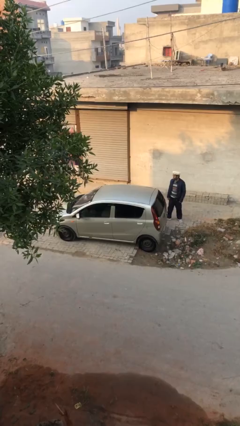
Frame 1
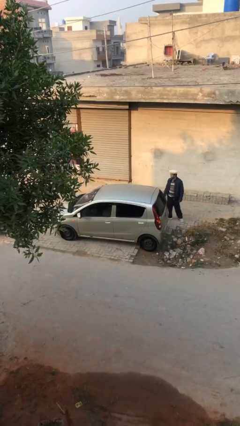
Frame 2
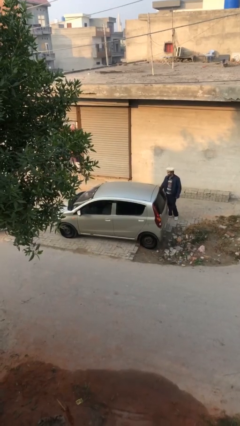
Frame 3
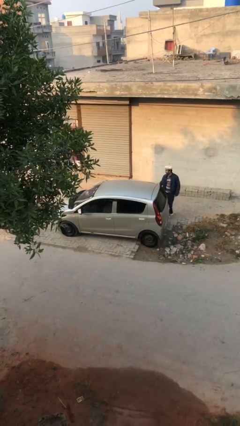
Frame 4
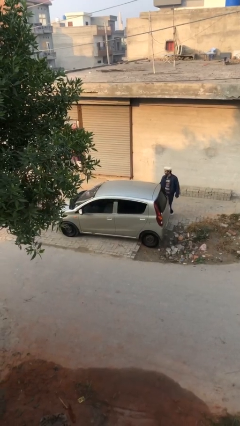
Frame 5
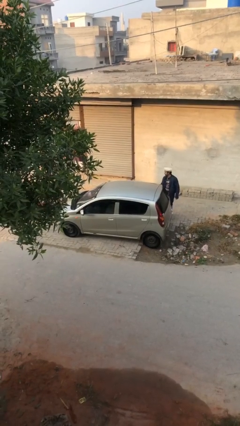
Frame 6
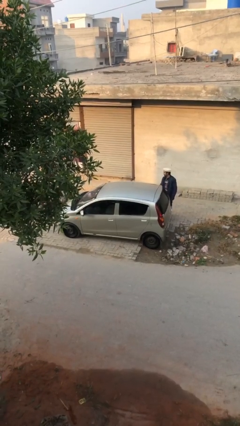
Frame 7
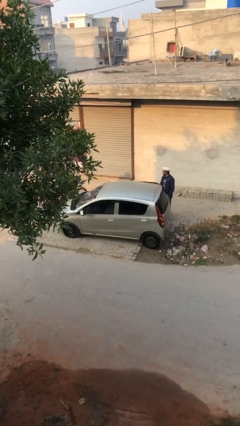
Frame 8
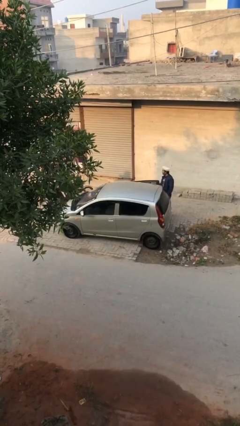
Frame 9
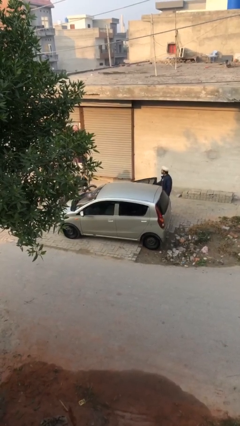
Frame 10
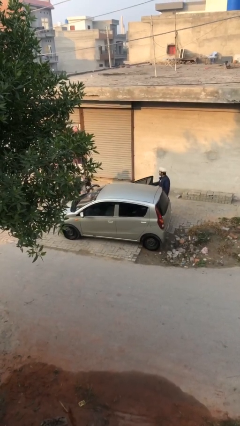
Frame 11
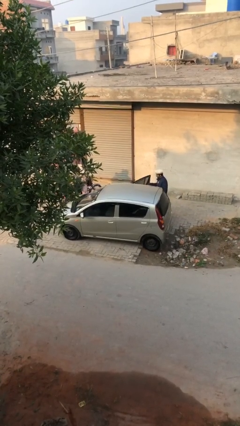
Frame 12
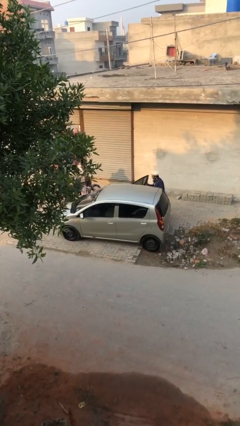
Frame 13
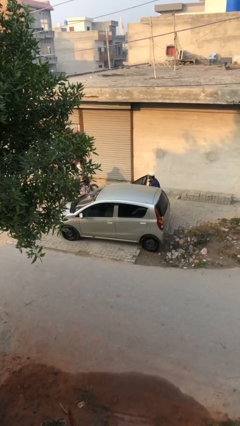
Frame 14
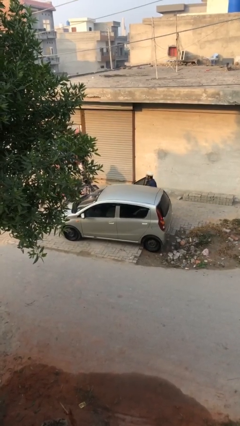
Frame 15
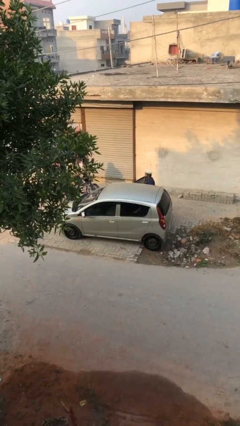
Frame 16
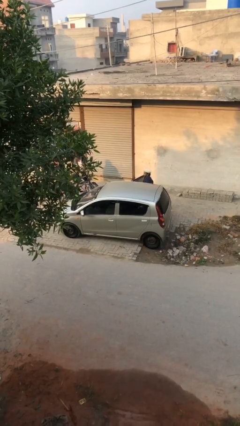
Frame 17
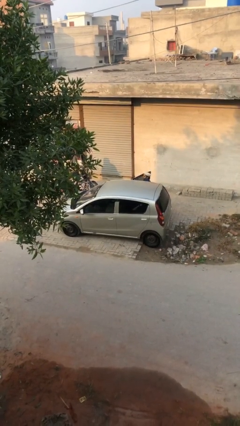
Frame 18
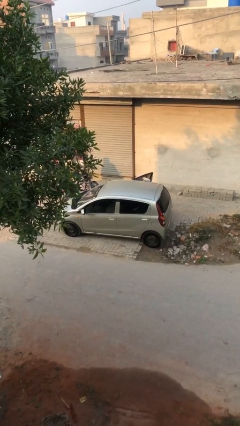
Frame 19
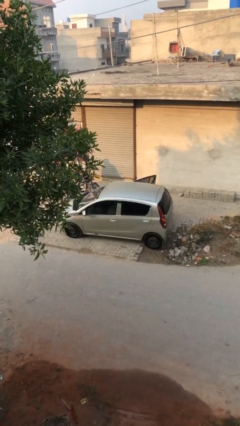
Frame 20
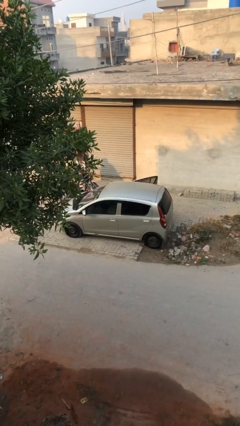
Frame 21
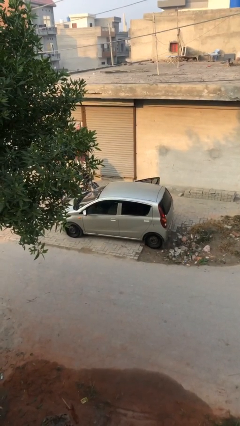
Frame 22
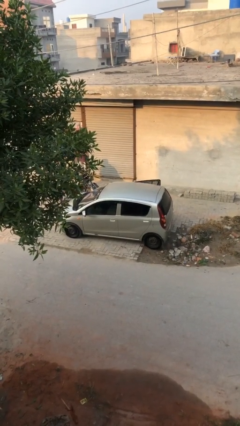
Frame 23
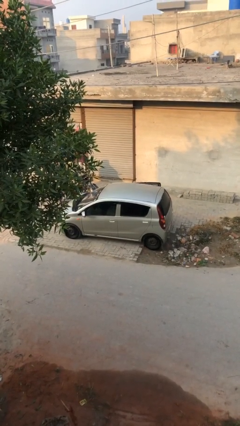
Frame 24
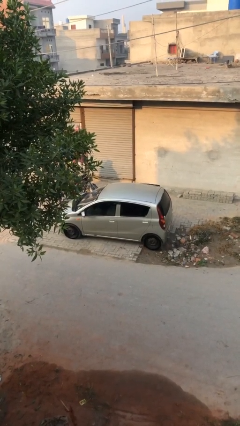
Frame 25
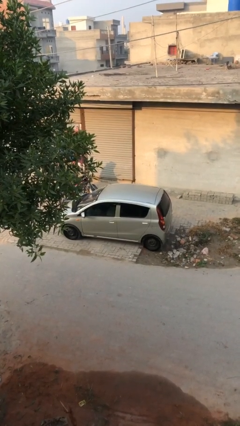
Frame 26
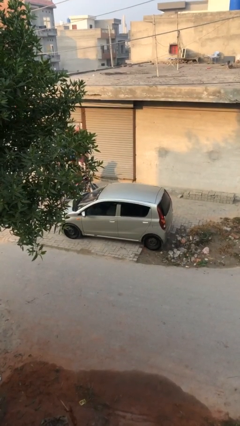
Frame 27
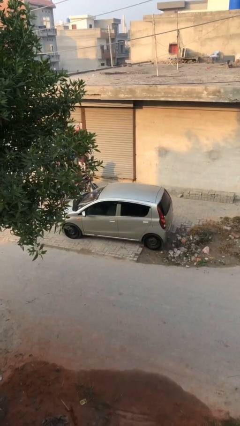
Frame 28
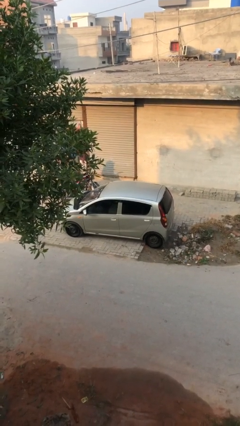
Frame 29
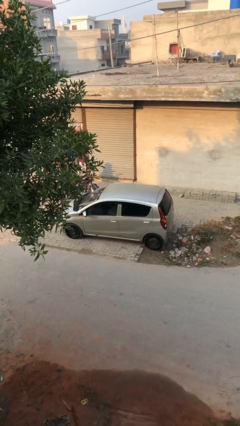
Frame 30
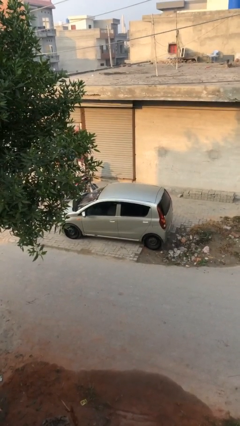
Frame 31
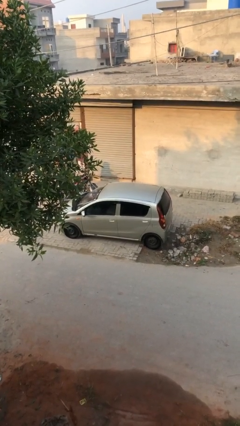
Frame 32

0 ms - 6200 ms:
car picks up person

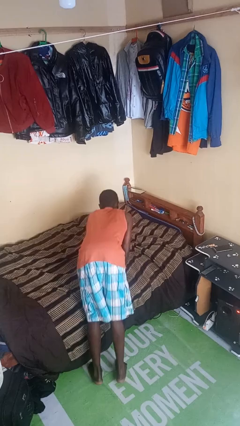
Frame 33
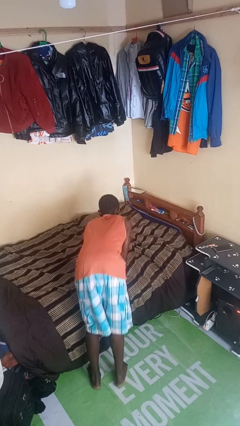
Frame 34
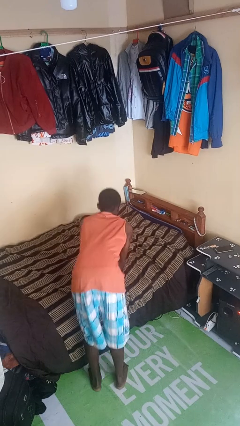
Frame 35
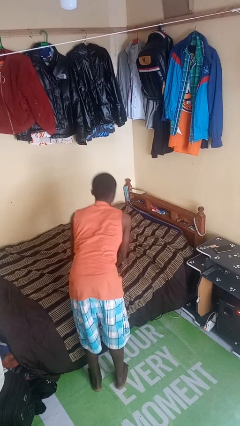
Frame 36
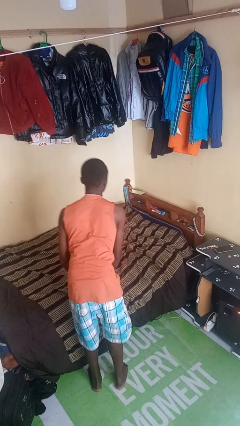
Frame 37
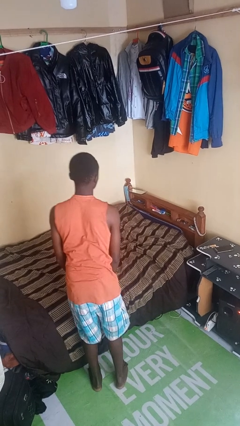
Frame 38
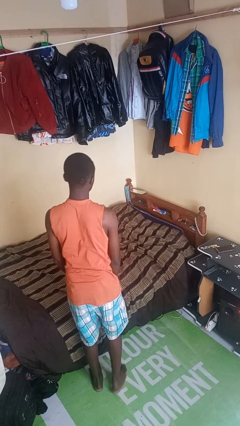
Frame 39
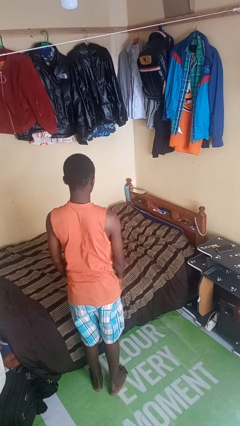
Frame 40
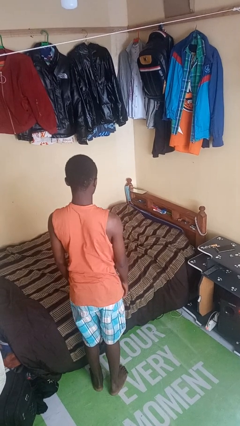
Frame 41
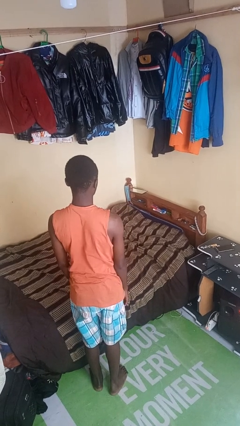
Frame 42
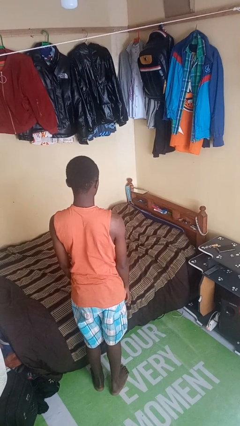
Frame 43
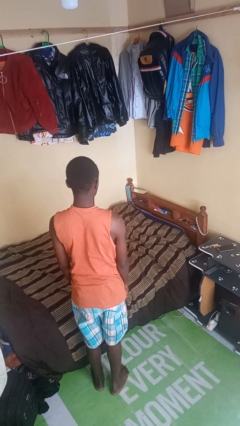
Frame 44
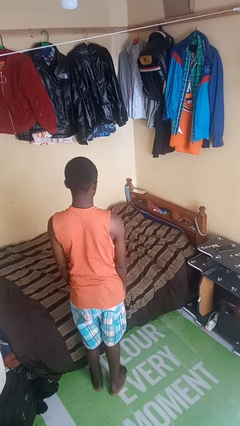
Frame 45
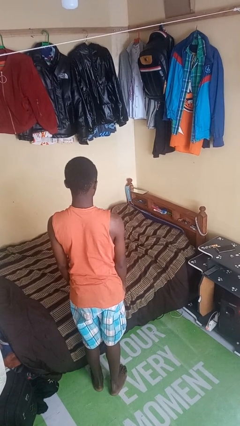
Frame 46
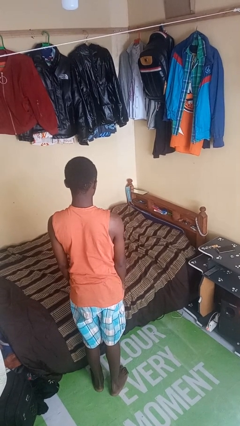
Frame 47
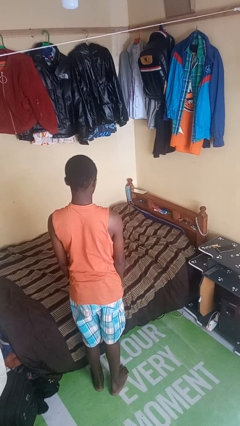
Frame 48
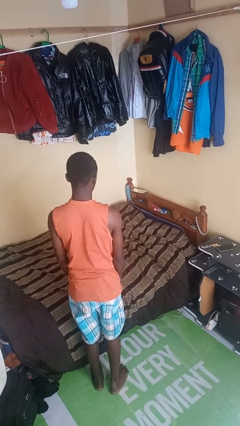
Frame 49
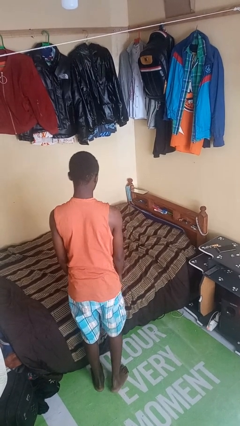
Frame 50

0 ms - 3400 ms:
person stands up

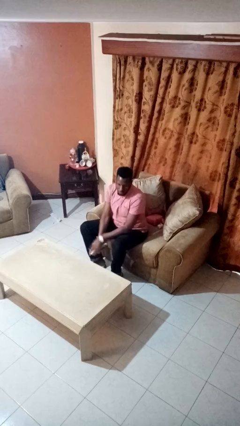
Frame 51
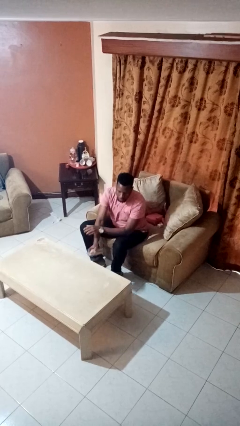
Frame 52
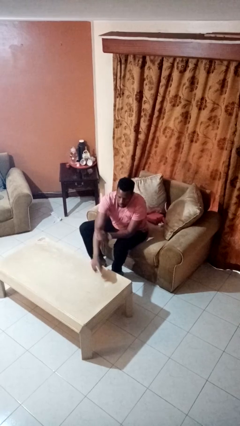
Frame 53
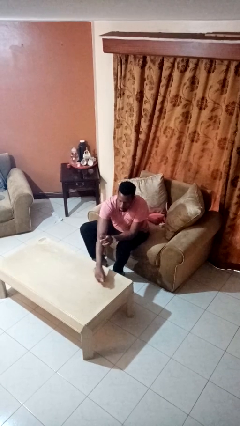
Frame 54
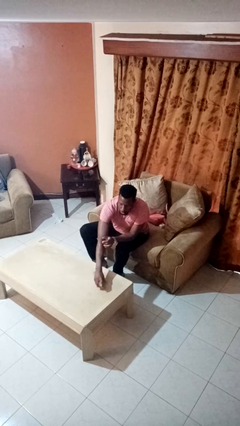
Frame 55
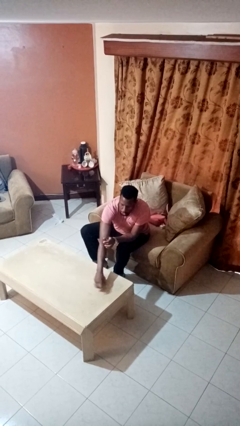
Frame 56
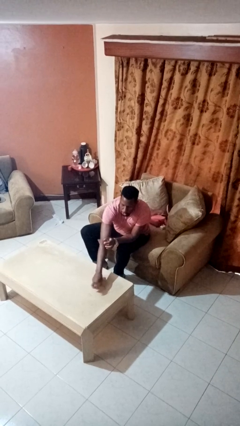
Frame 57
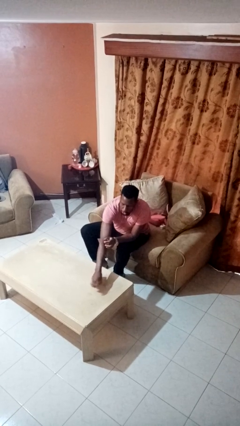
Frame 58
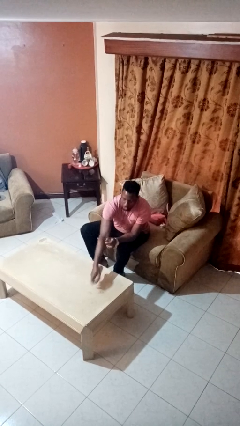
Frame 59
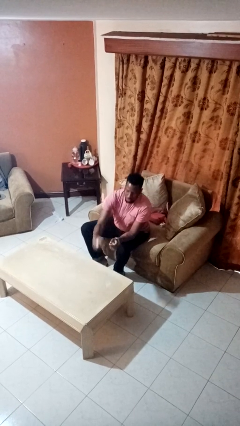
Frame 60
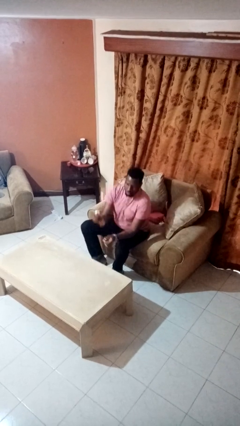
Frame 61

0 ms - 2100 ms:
person sprays from bottle

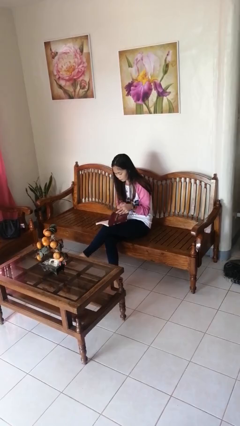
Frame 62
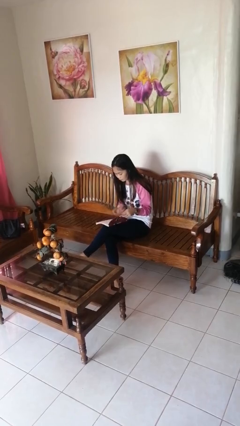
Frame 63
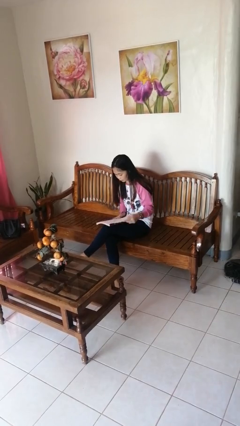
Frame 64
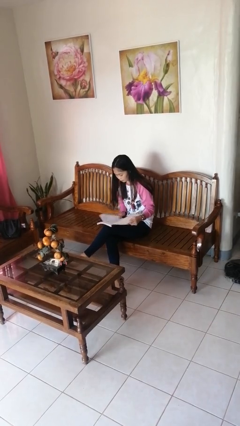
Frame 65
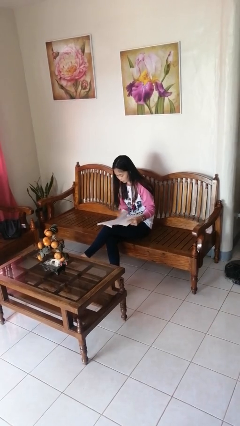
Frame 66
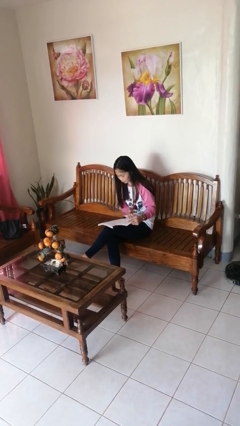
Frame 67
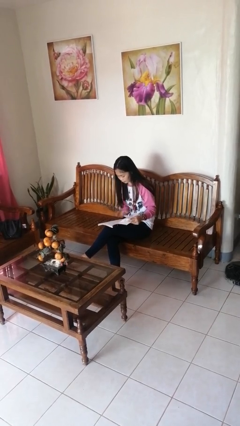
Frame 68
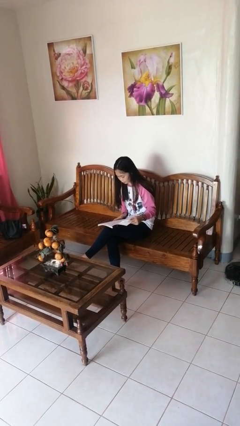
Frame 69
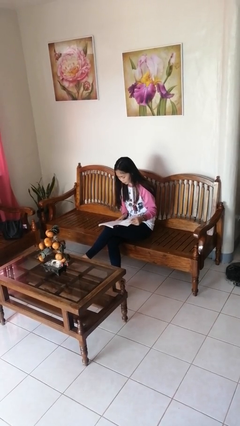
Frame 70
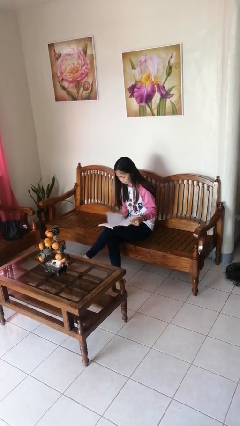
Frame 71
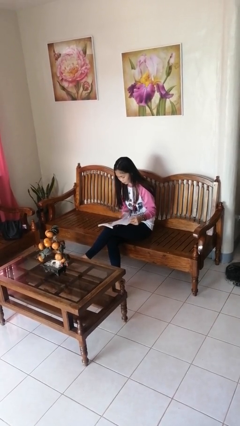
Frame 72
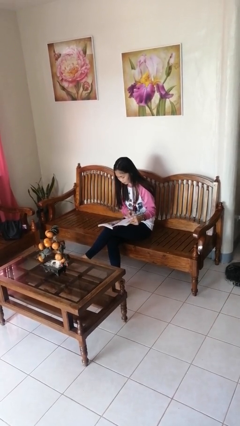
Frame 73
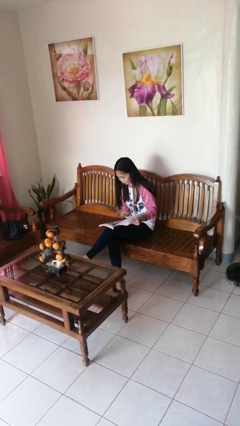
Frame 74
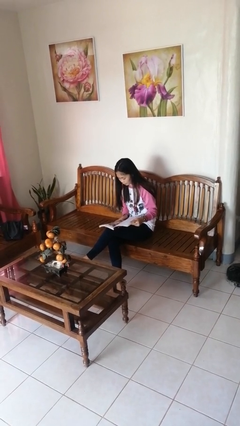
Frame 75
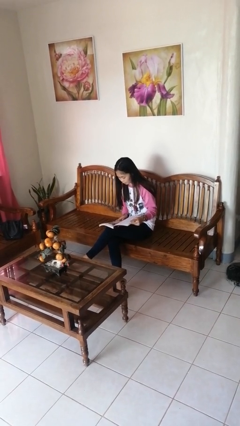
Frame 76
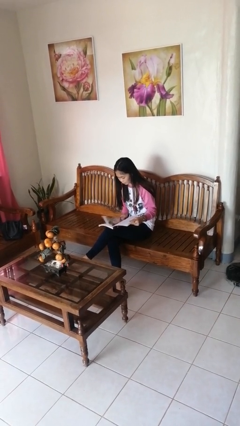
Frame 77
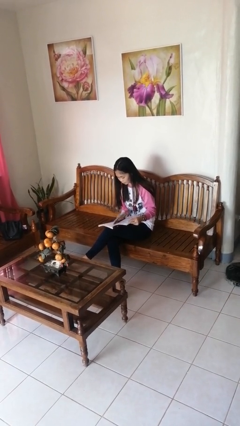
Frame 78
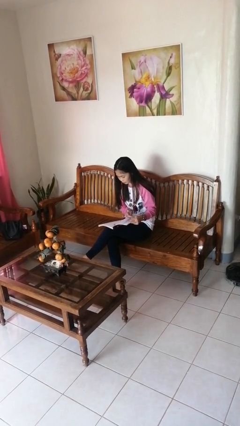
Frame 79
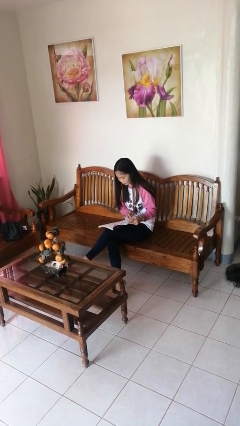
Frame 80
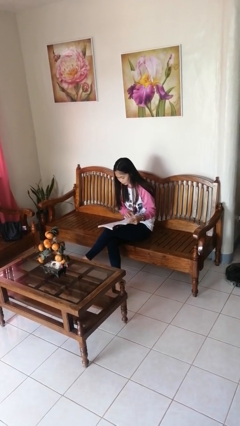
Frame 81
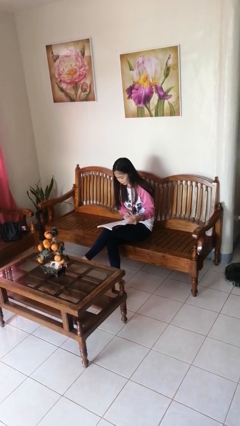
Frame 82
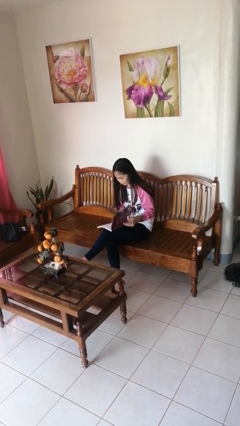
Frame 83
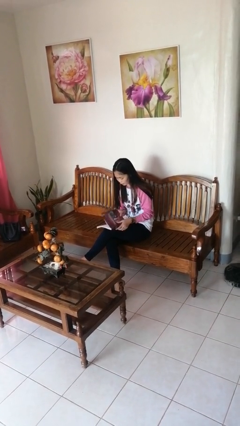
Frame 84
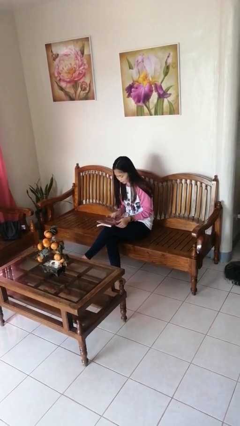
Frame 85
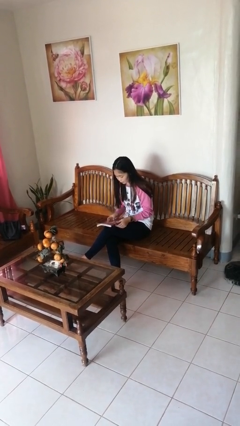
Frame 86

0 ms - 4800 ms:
person reads book

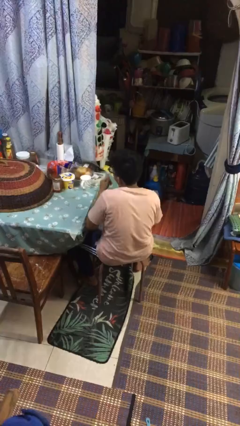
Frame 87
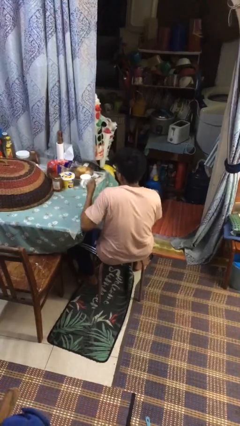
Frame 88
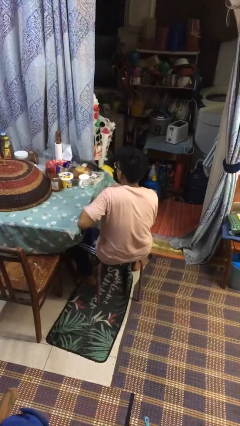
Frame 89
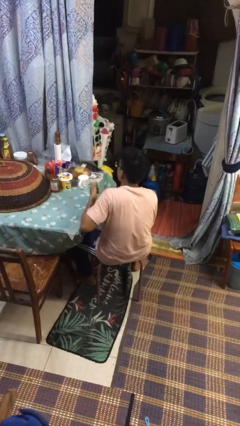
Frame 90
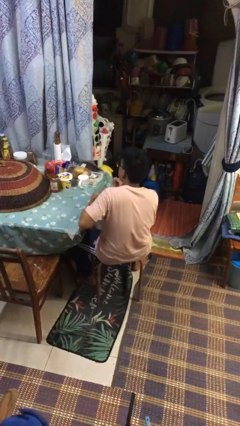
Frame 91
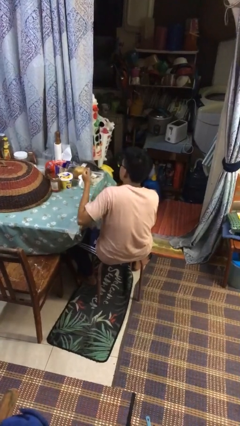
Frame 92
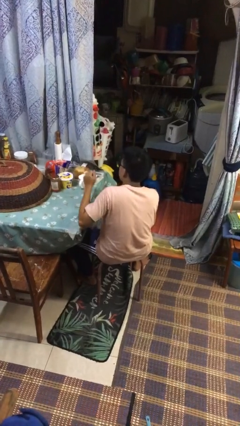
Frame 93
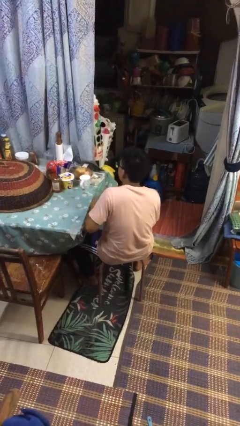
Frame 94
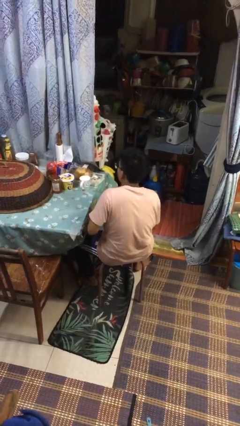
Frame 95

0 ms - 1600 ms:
person drums on chest
